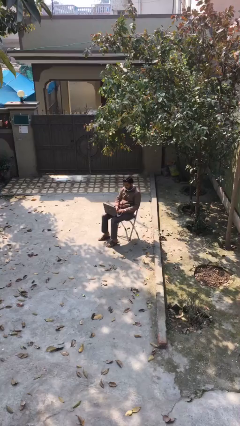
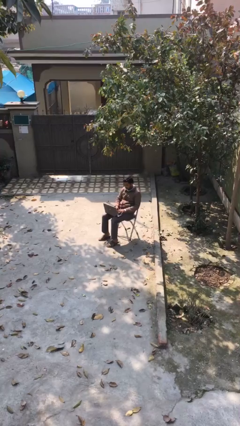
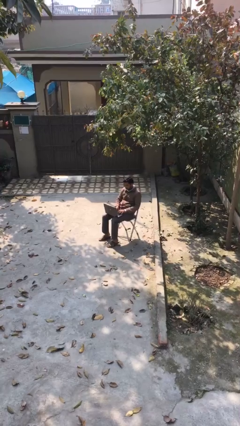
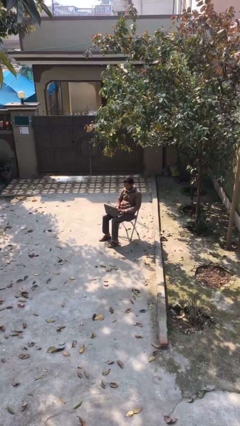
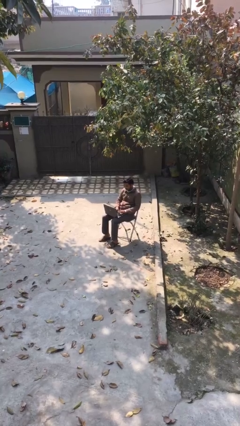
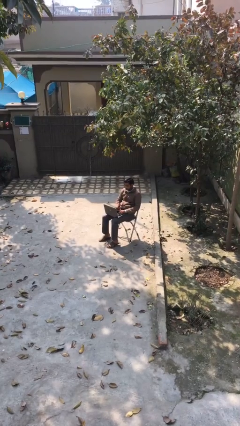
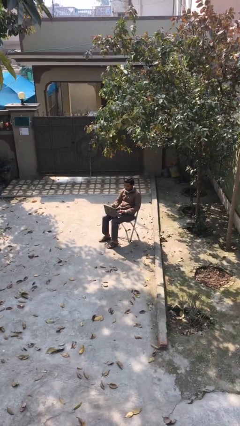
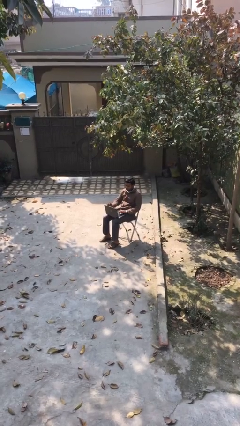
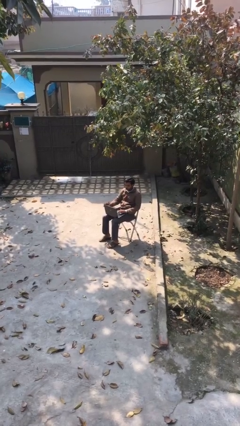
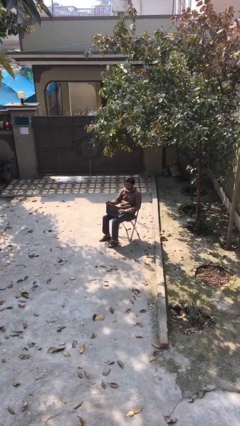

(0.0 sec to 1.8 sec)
person interacts with laptop

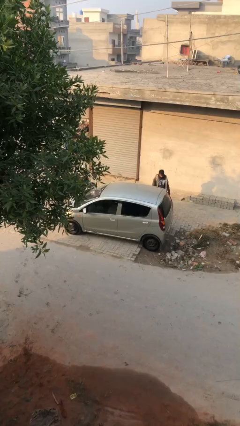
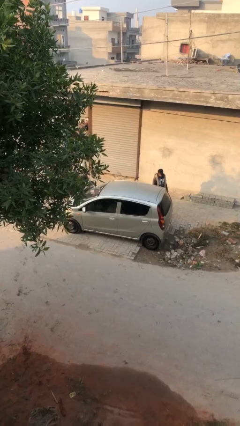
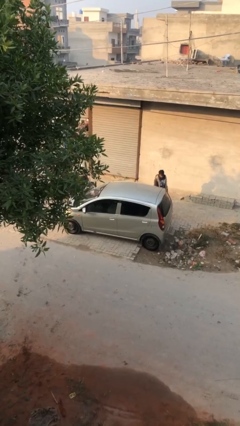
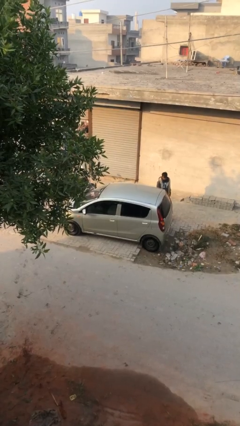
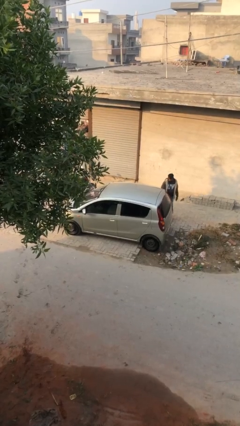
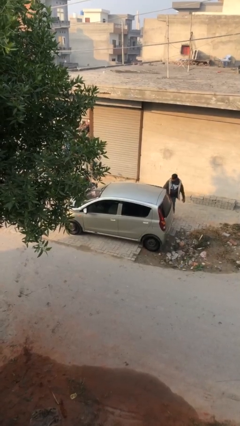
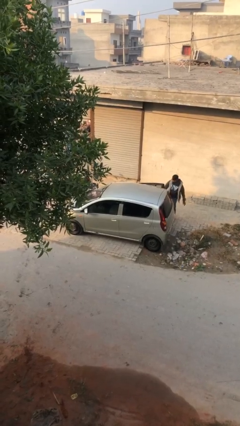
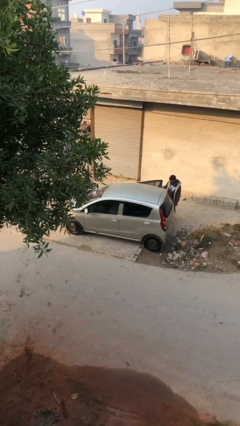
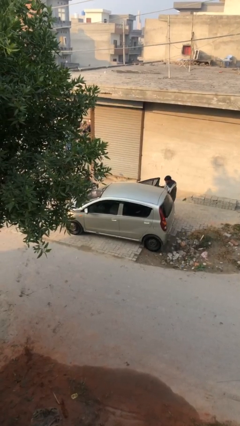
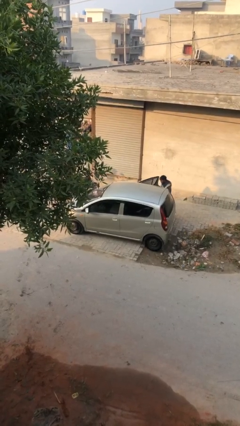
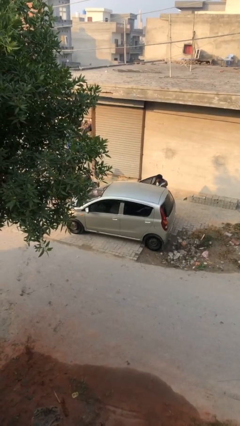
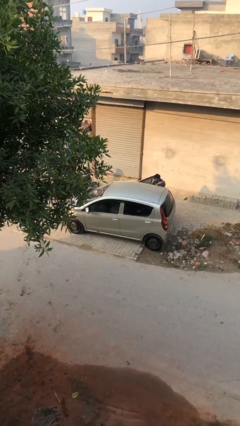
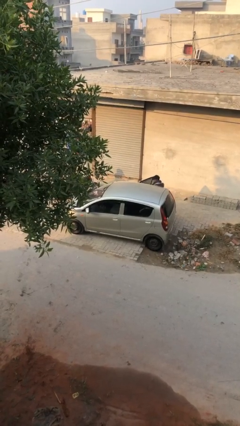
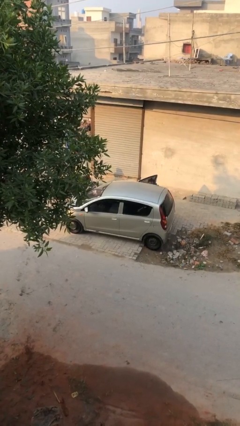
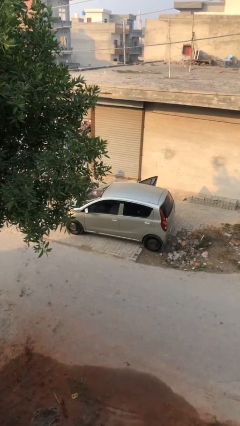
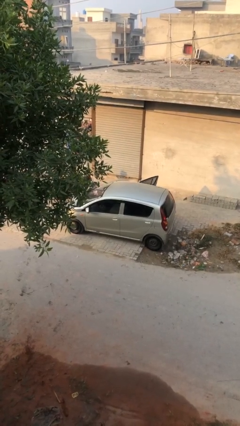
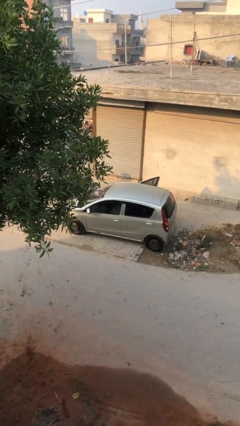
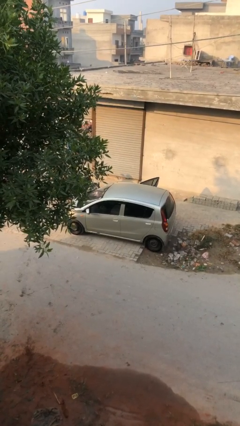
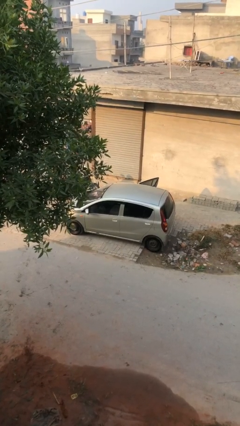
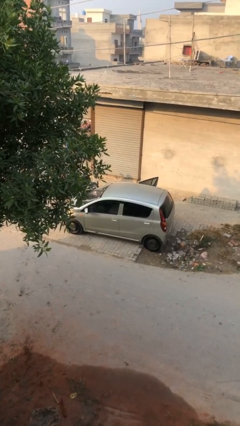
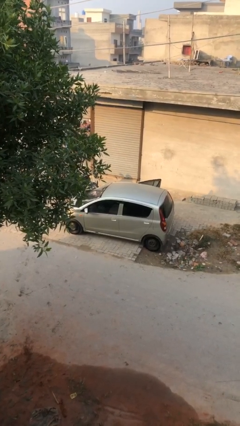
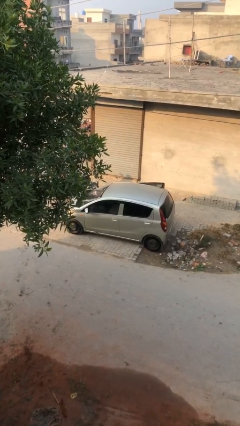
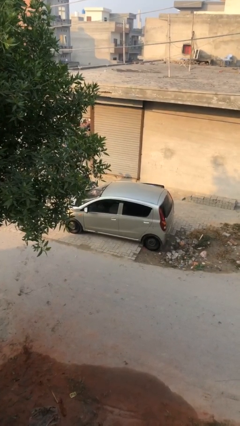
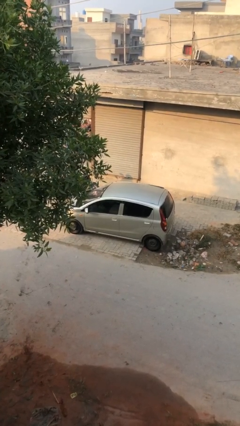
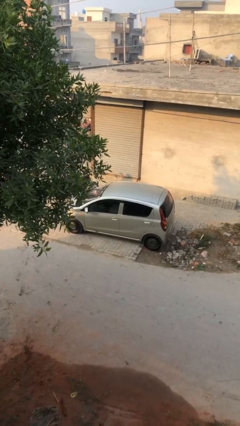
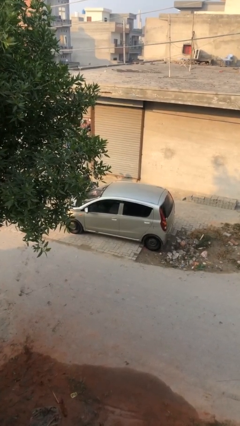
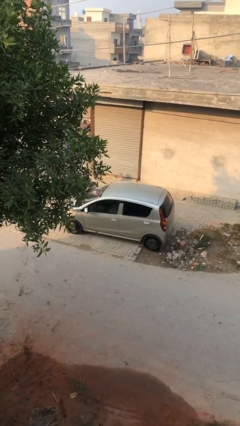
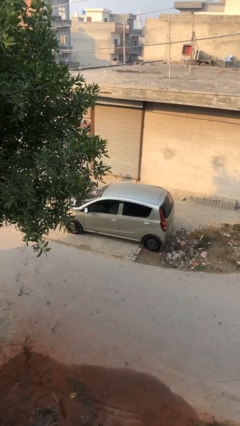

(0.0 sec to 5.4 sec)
car picks up person

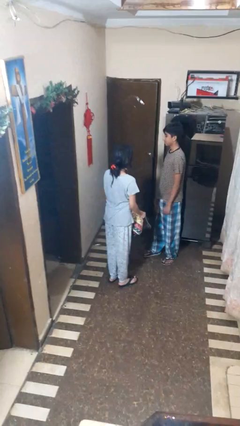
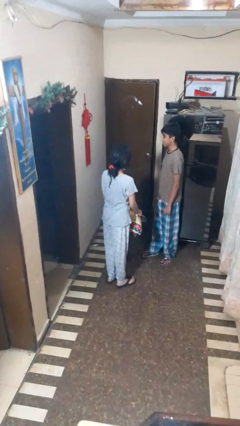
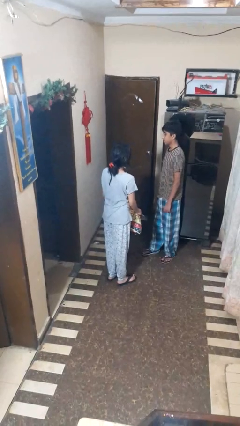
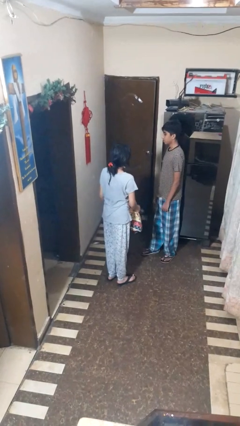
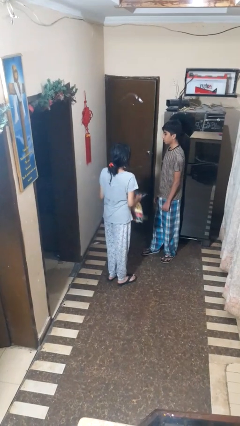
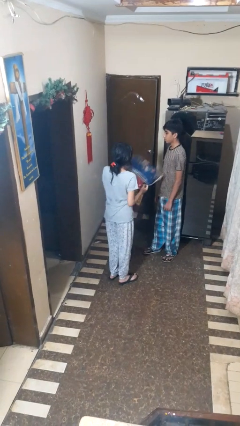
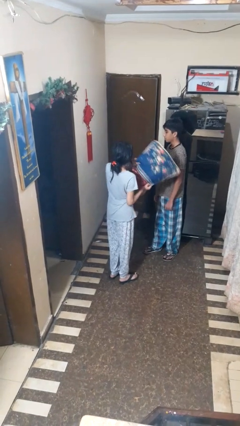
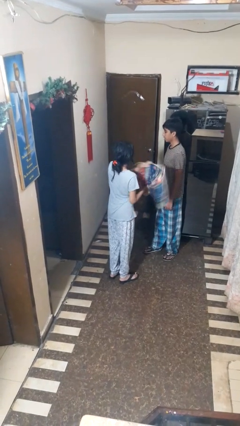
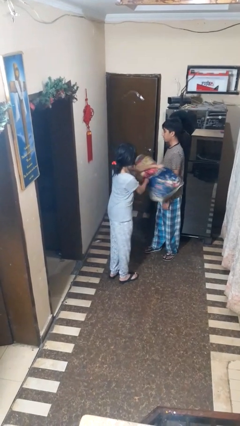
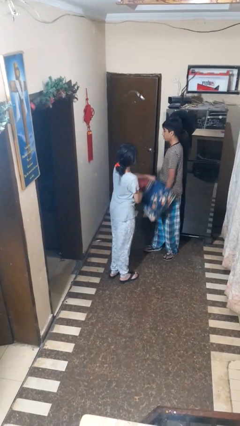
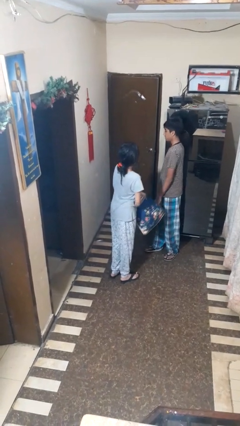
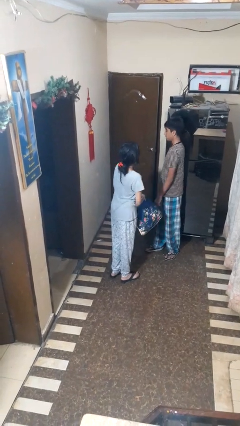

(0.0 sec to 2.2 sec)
person hits person with pillow

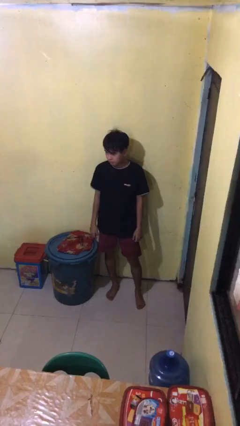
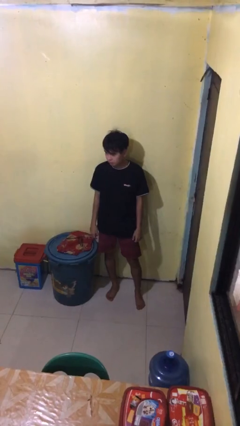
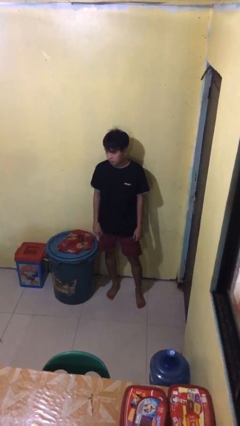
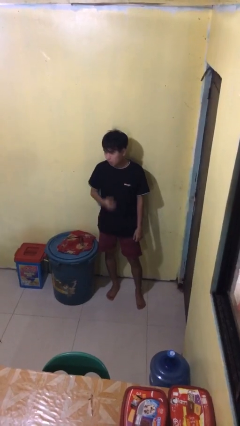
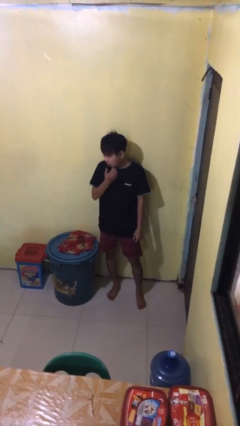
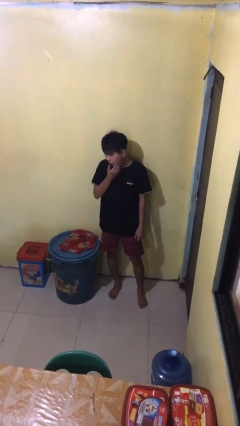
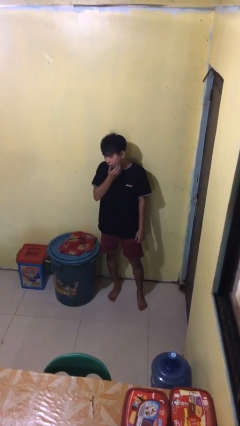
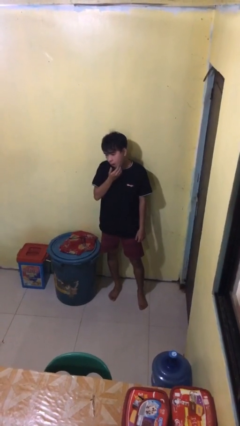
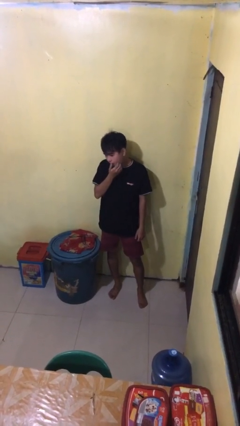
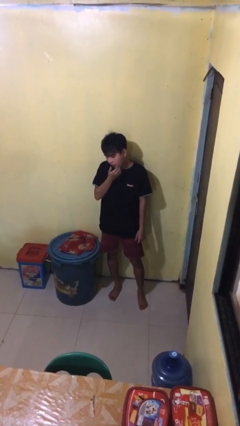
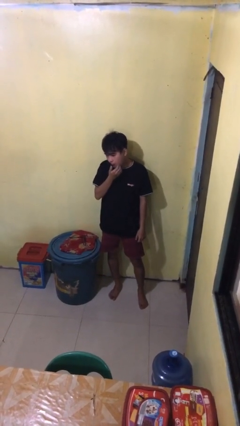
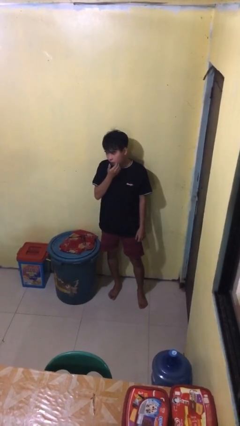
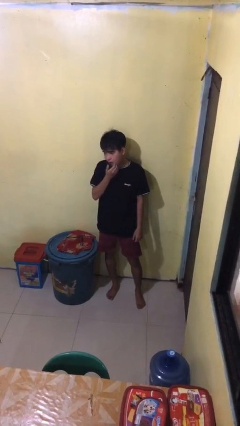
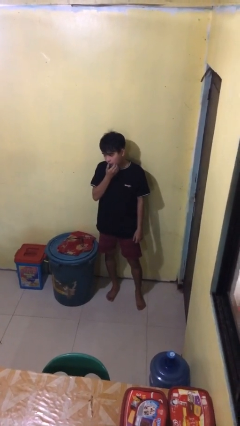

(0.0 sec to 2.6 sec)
person scratches face

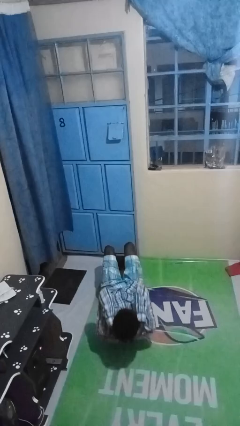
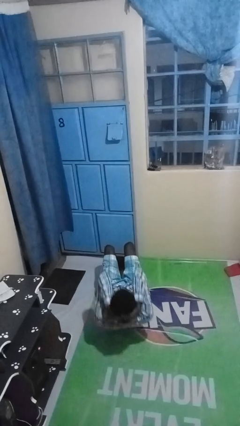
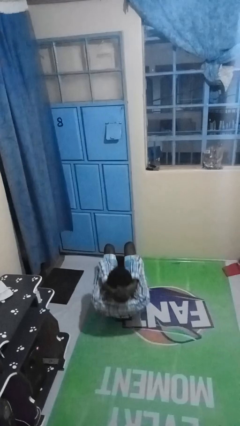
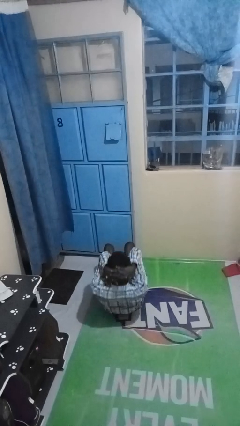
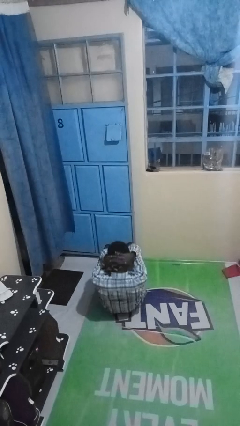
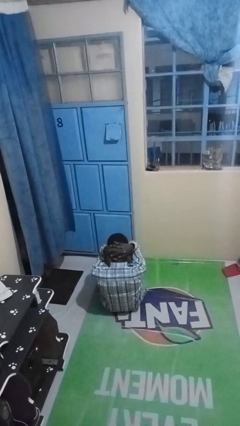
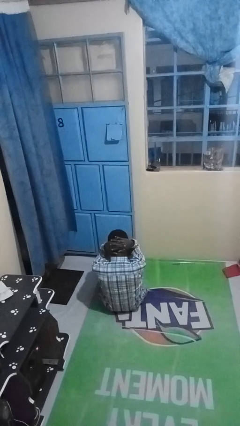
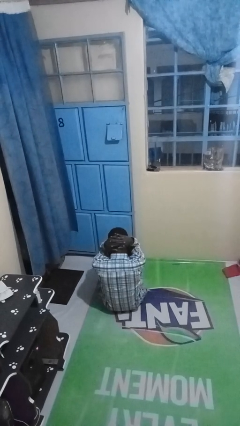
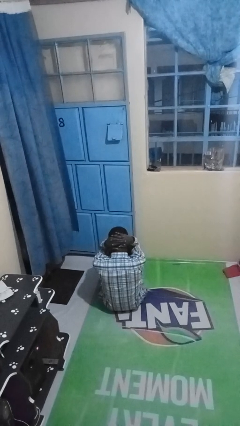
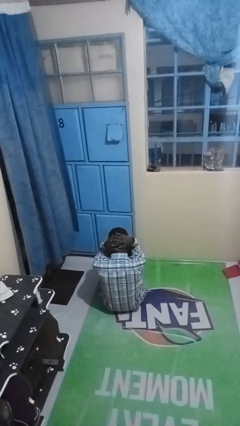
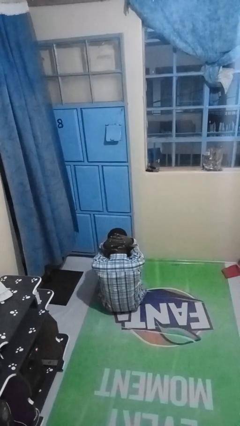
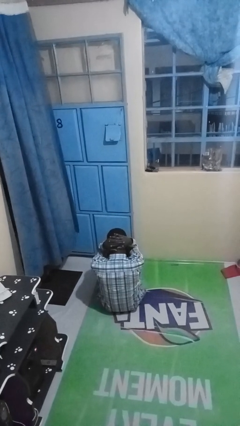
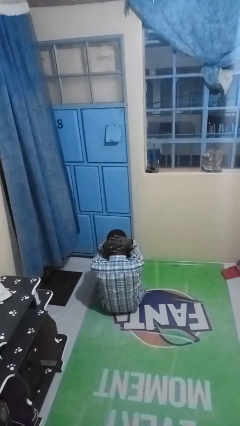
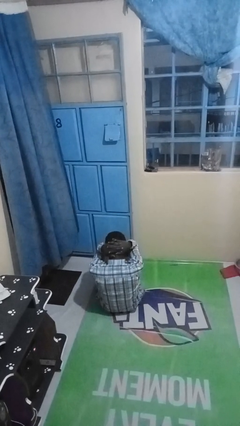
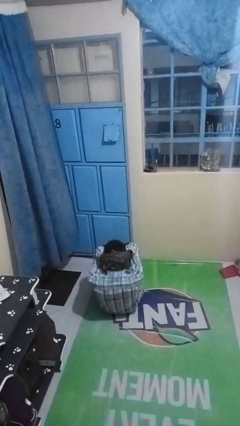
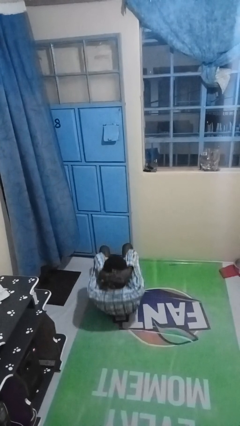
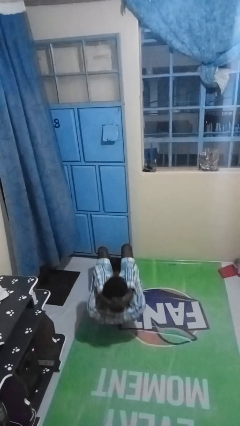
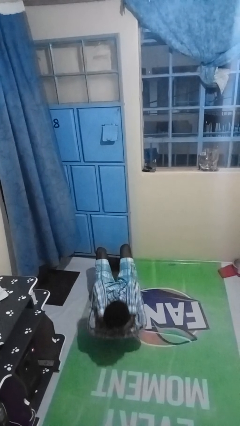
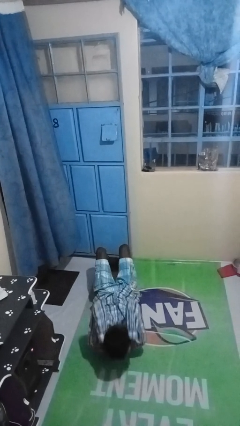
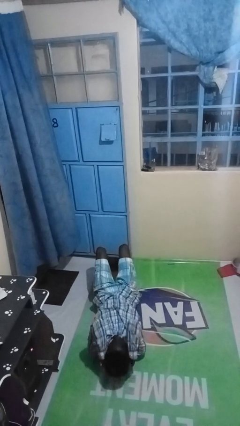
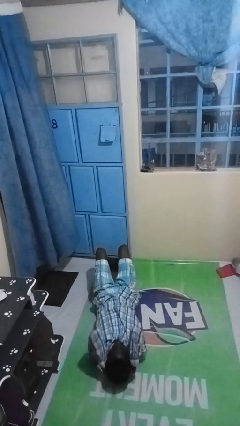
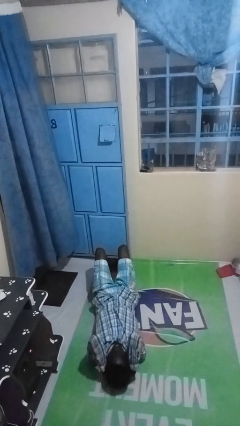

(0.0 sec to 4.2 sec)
person exercises with situp

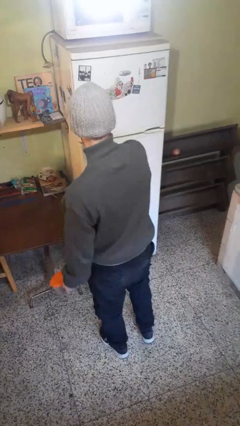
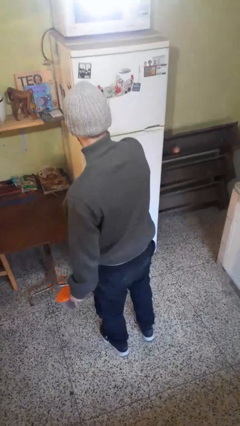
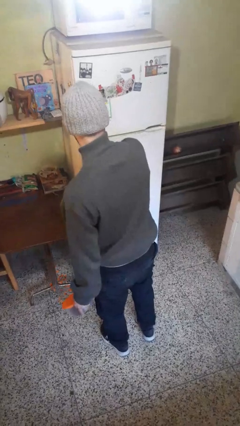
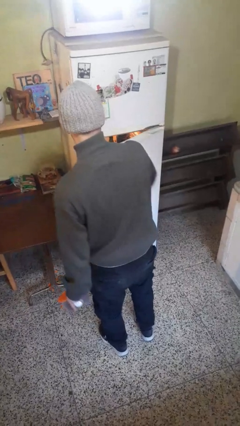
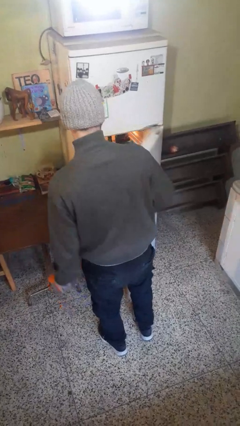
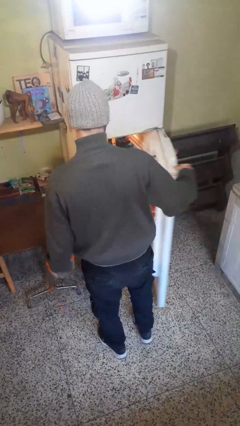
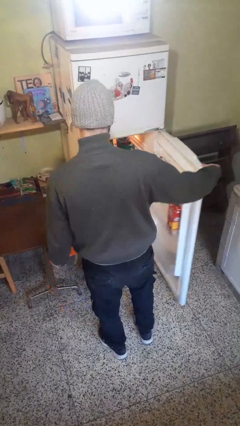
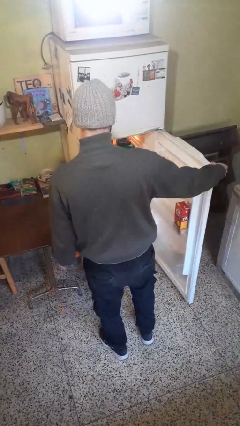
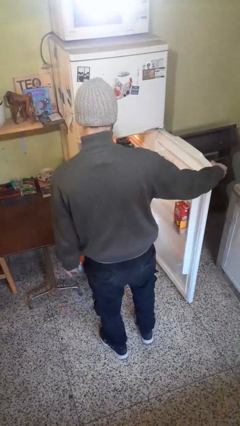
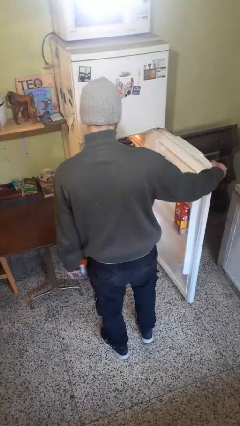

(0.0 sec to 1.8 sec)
person opens refrigerator
